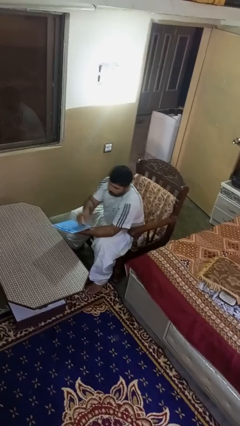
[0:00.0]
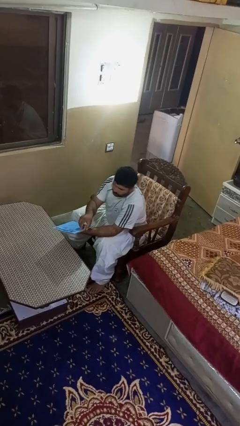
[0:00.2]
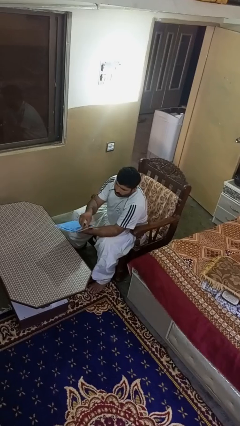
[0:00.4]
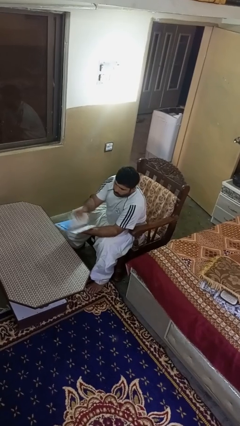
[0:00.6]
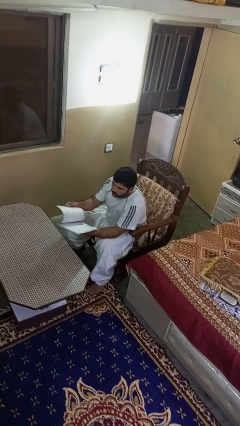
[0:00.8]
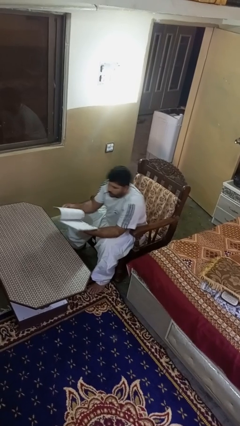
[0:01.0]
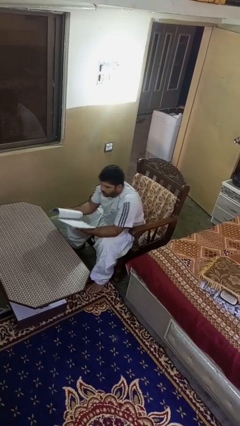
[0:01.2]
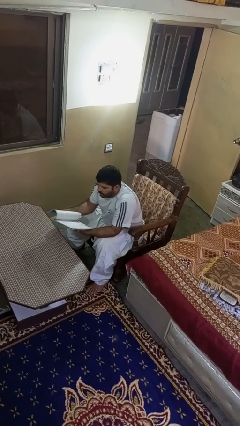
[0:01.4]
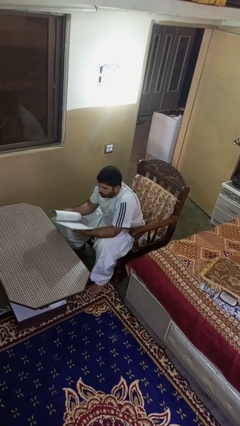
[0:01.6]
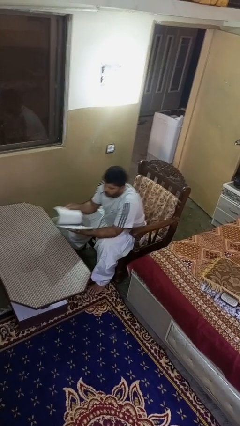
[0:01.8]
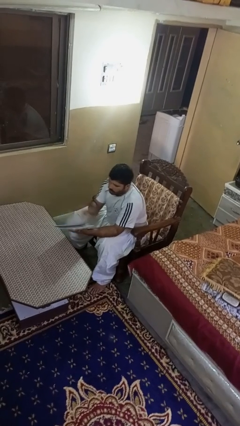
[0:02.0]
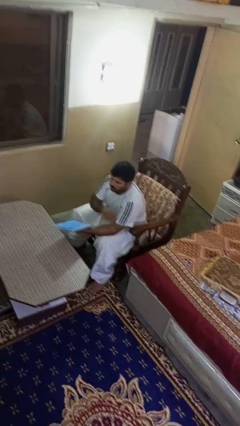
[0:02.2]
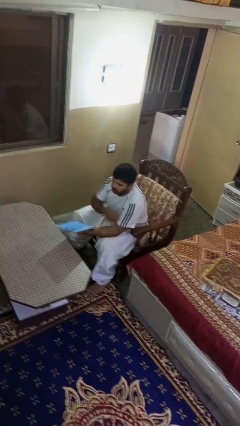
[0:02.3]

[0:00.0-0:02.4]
person reads magazine

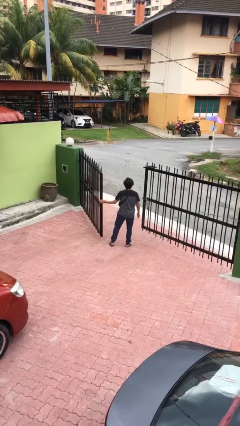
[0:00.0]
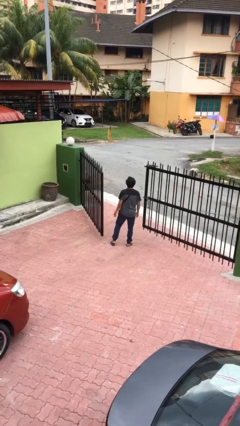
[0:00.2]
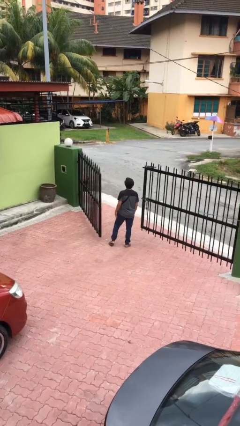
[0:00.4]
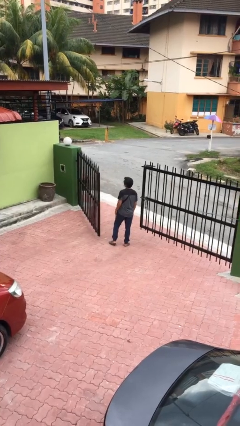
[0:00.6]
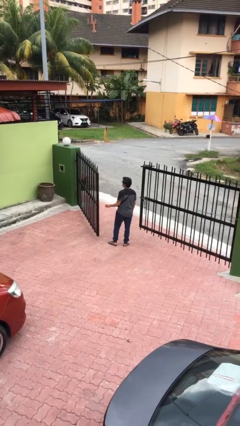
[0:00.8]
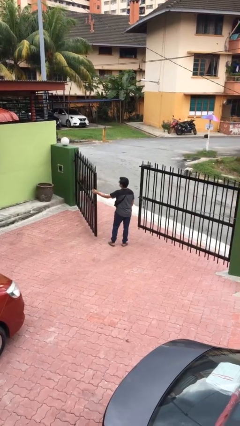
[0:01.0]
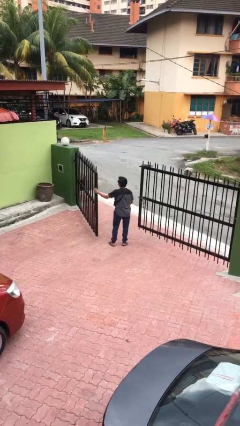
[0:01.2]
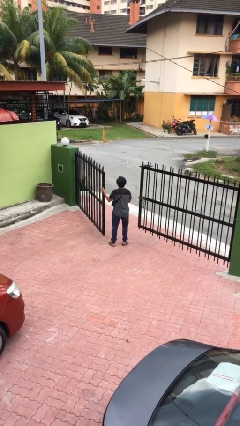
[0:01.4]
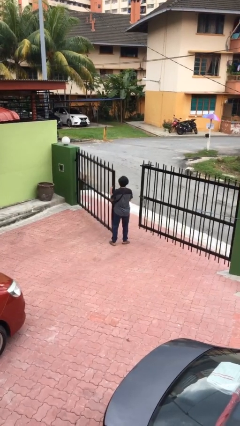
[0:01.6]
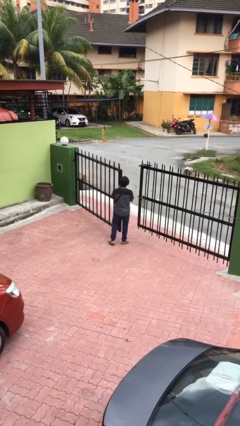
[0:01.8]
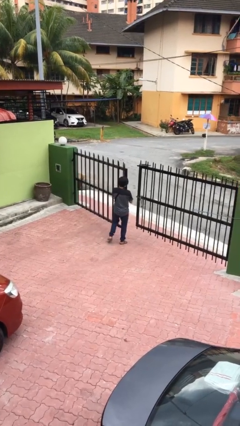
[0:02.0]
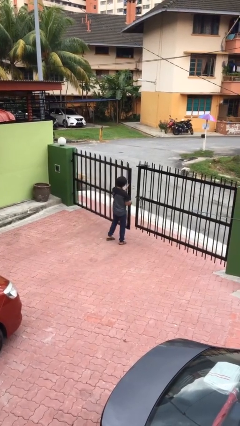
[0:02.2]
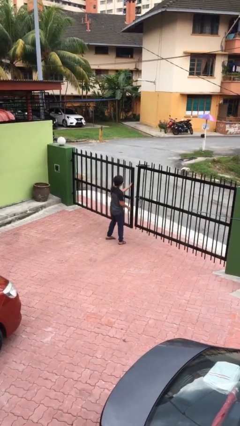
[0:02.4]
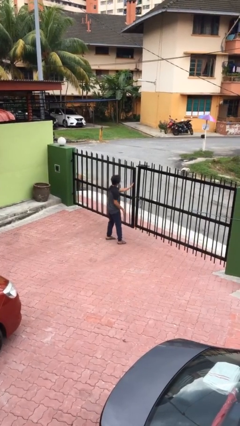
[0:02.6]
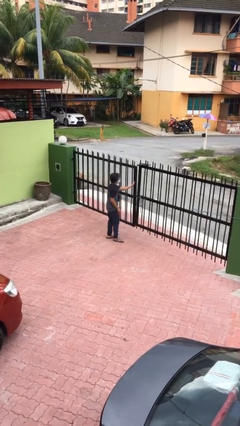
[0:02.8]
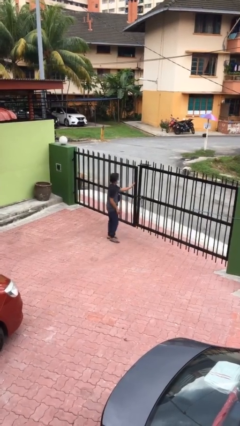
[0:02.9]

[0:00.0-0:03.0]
person closes facility door

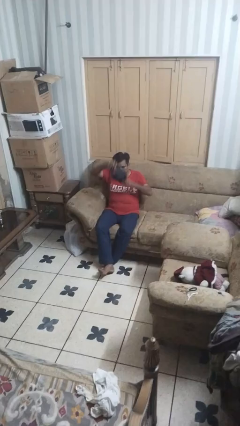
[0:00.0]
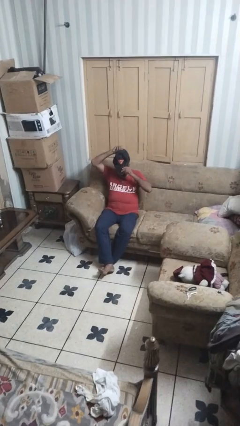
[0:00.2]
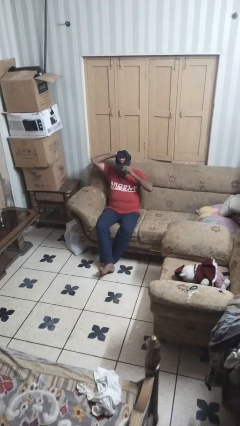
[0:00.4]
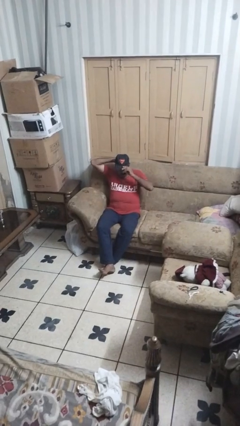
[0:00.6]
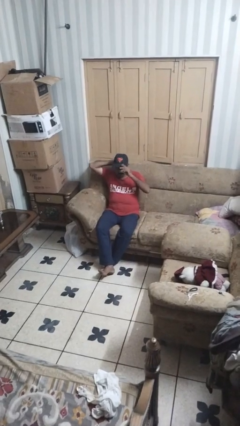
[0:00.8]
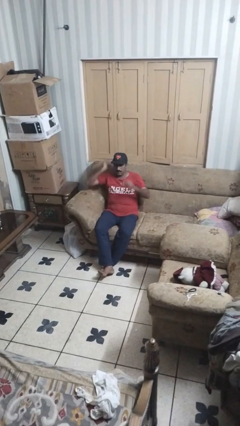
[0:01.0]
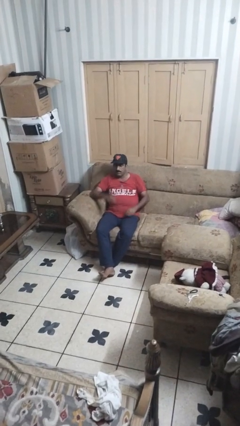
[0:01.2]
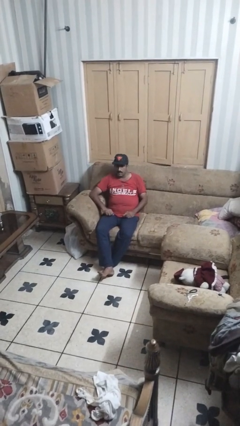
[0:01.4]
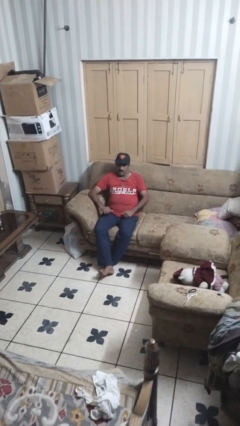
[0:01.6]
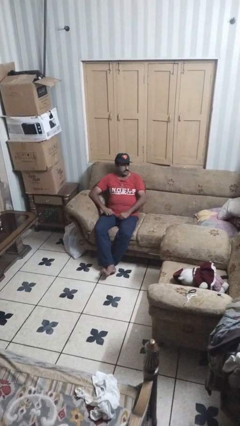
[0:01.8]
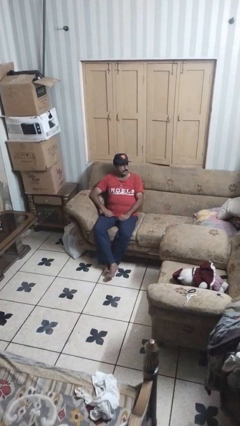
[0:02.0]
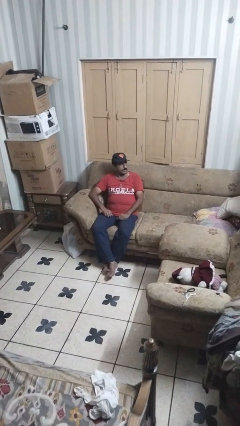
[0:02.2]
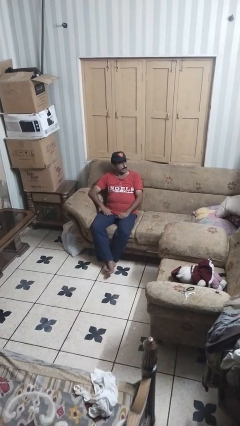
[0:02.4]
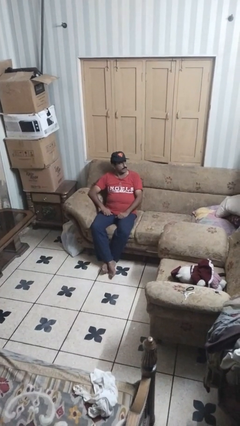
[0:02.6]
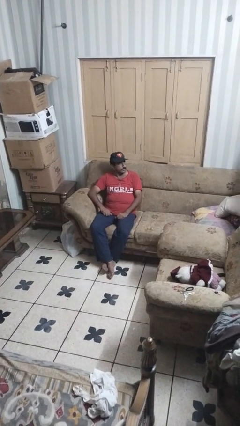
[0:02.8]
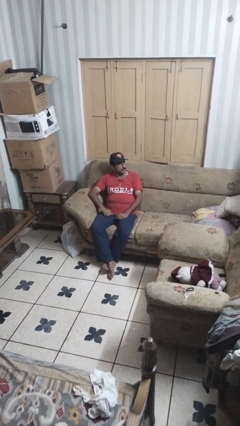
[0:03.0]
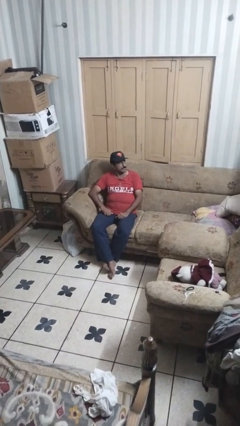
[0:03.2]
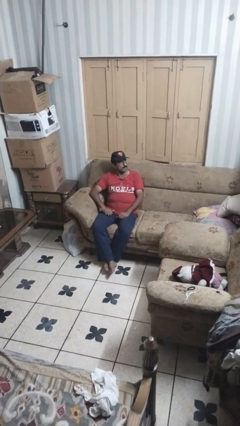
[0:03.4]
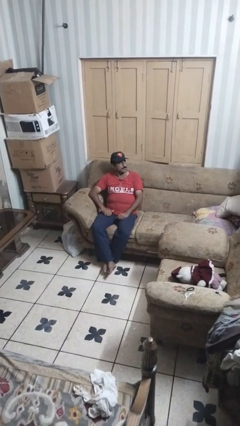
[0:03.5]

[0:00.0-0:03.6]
person puts on hat

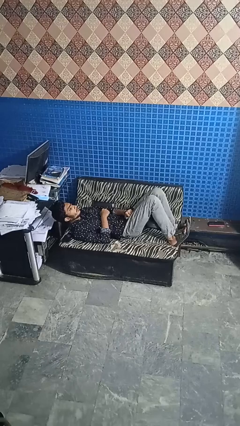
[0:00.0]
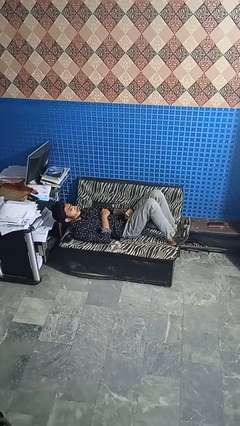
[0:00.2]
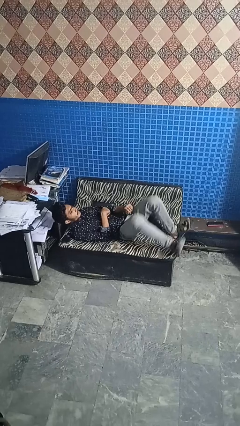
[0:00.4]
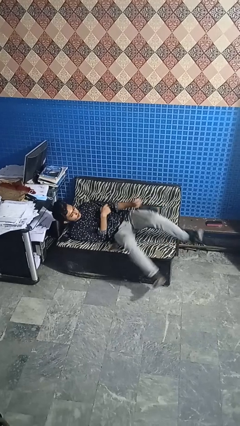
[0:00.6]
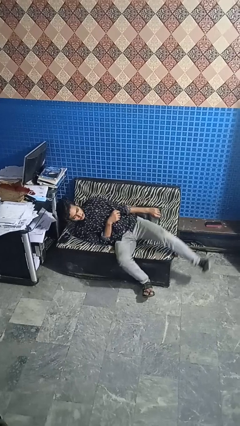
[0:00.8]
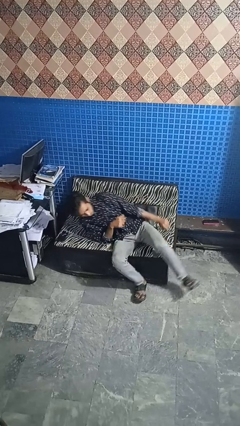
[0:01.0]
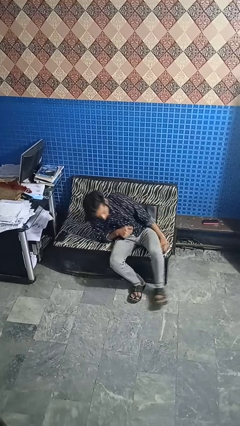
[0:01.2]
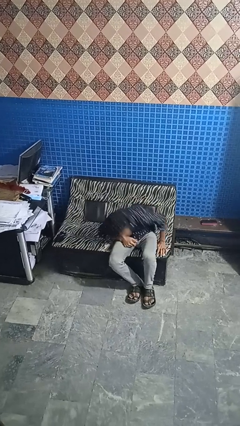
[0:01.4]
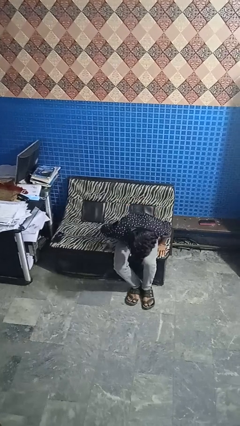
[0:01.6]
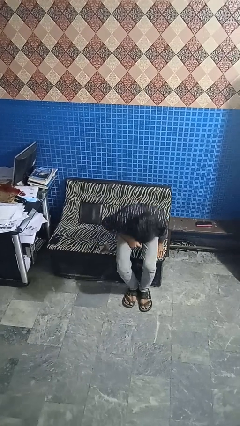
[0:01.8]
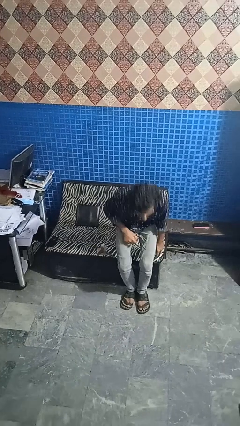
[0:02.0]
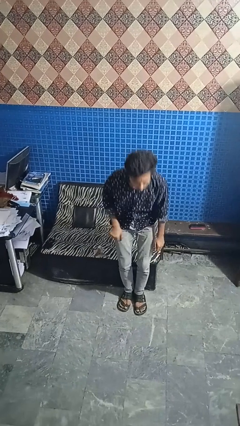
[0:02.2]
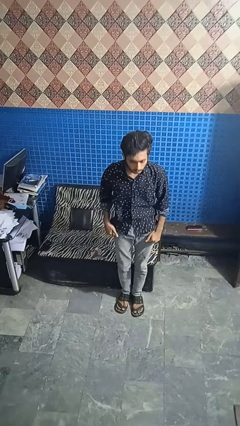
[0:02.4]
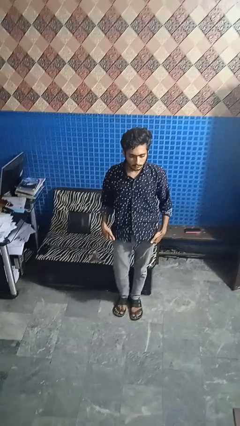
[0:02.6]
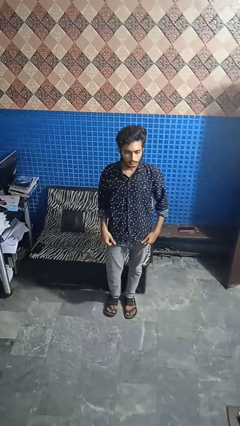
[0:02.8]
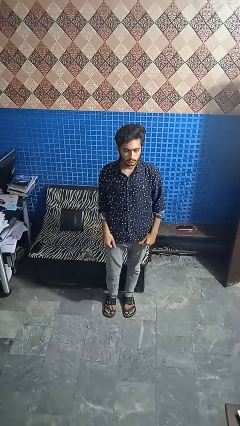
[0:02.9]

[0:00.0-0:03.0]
person stands up

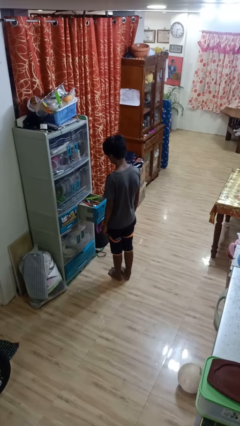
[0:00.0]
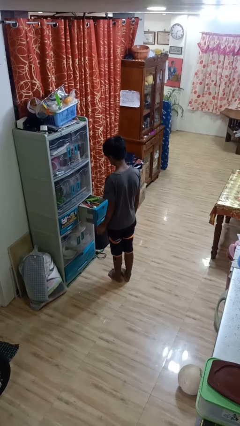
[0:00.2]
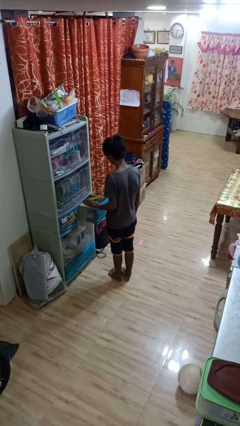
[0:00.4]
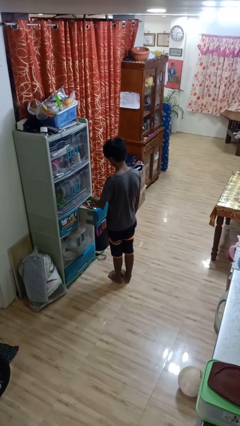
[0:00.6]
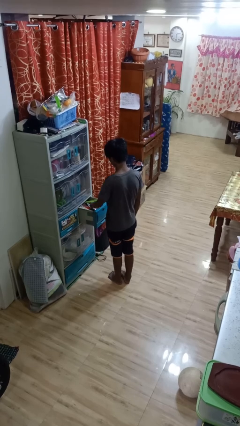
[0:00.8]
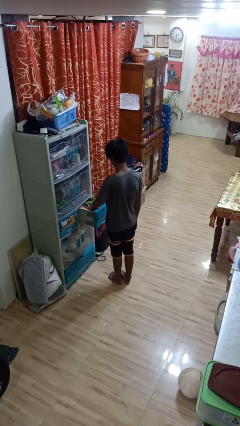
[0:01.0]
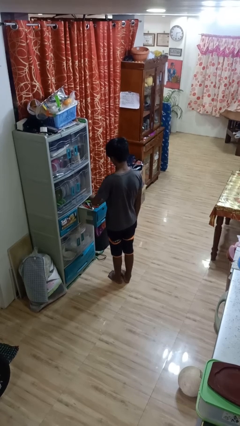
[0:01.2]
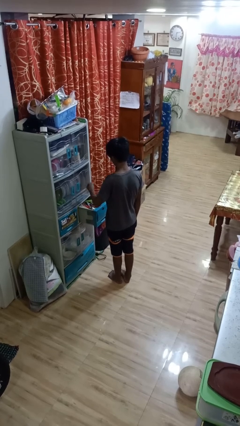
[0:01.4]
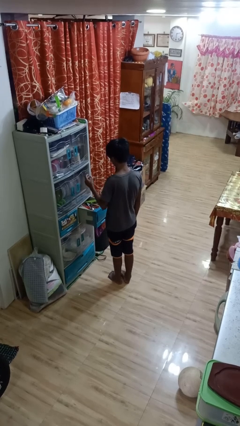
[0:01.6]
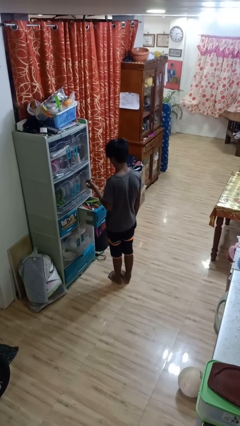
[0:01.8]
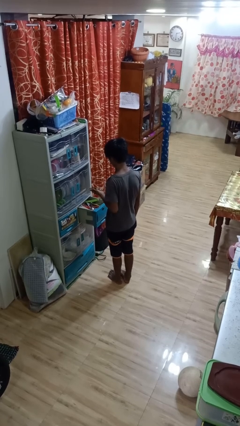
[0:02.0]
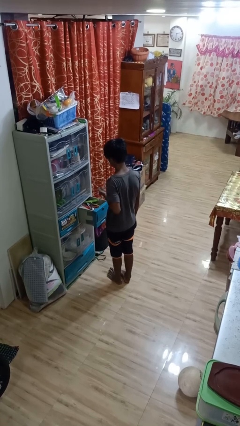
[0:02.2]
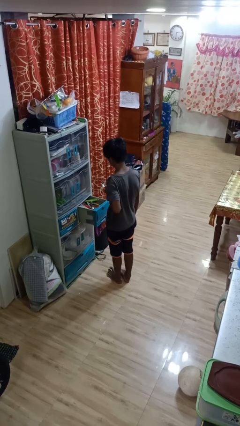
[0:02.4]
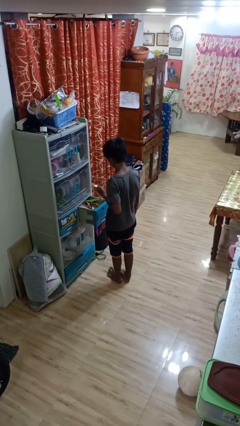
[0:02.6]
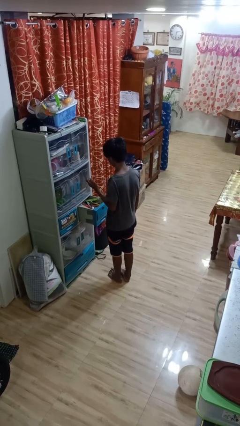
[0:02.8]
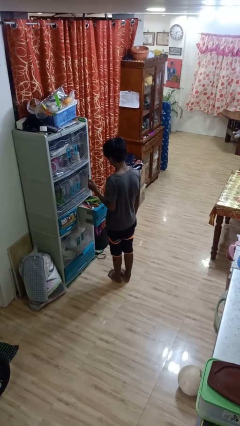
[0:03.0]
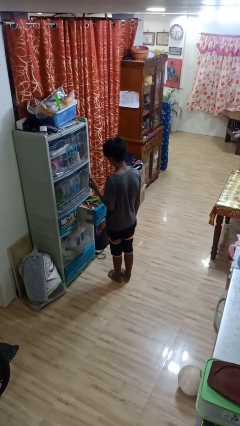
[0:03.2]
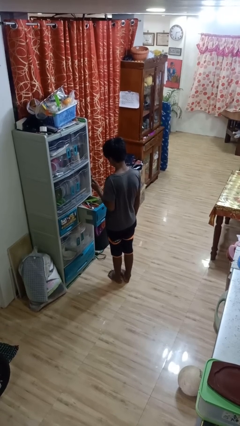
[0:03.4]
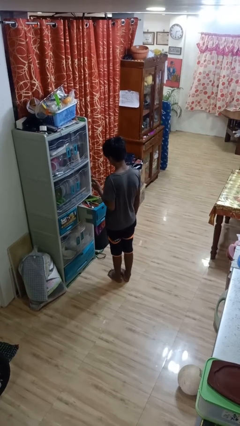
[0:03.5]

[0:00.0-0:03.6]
person takes object from kitchen drawer

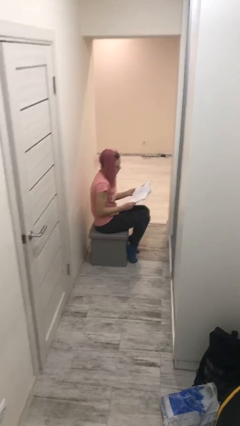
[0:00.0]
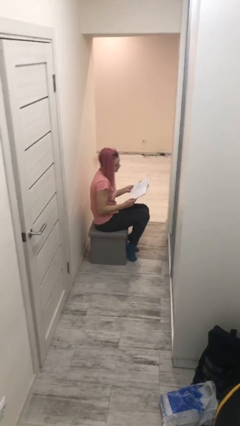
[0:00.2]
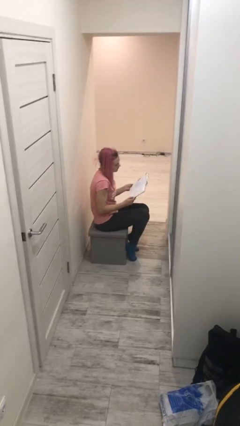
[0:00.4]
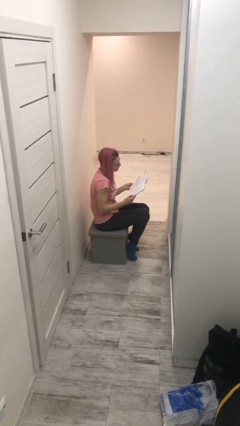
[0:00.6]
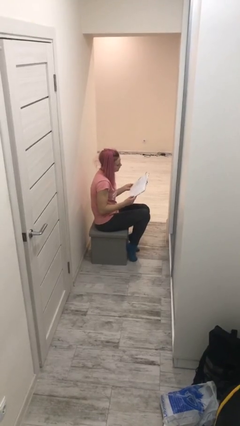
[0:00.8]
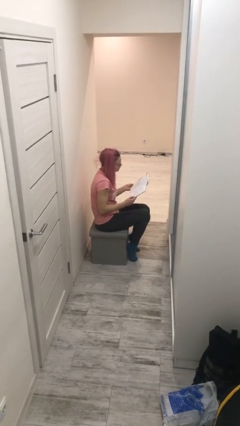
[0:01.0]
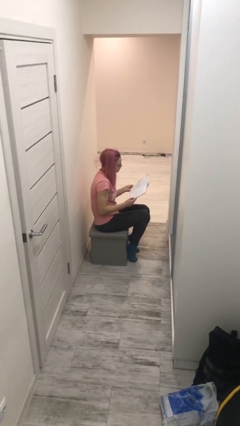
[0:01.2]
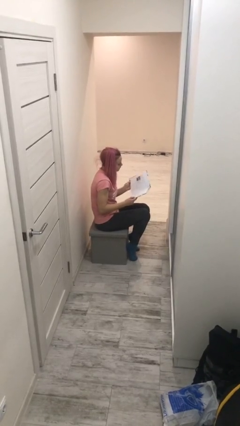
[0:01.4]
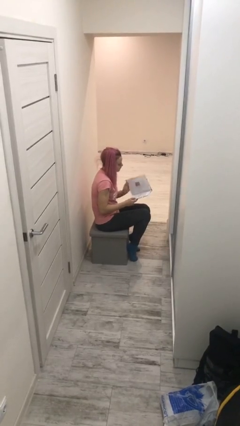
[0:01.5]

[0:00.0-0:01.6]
person reads document
